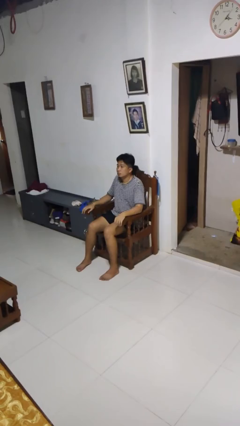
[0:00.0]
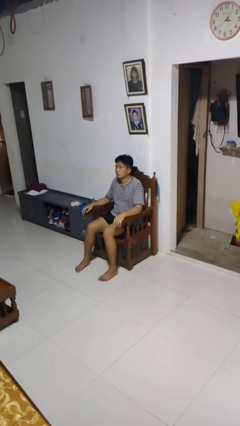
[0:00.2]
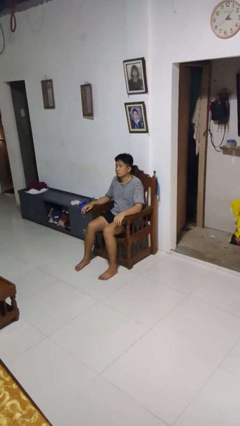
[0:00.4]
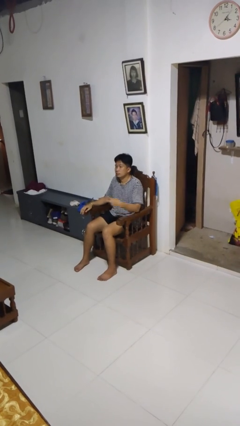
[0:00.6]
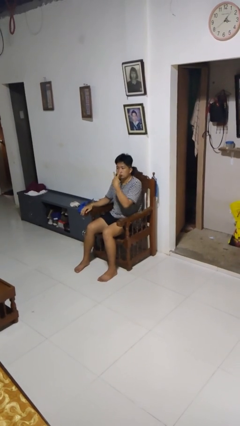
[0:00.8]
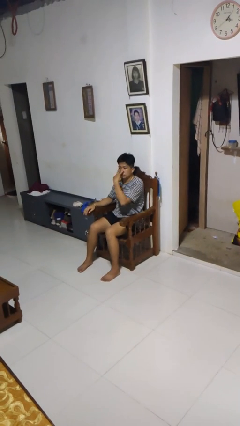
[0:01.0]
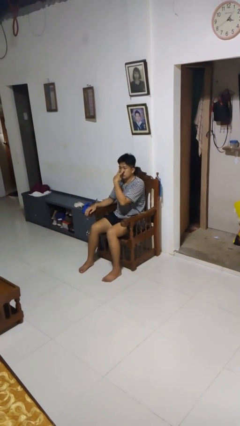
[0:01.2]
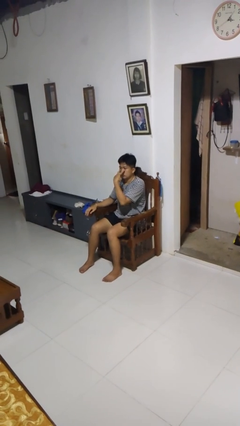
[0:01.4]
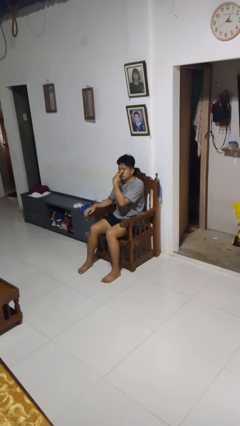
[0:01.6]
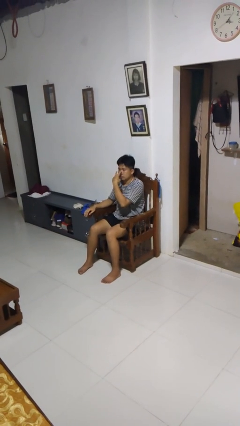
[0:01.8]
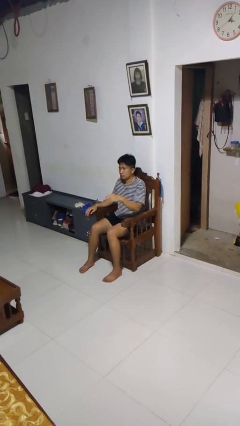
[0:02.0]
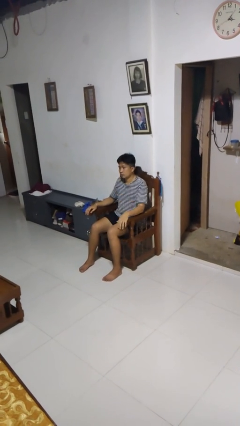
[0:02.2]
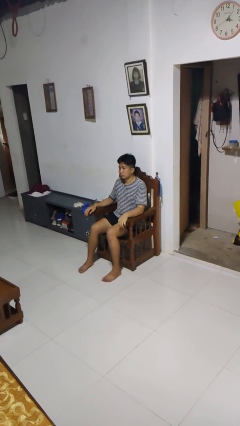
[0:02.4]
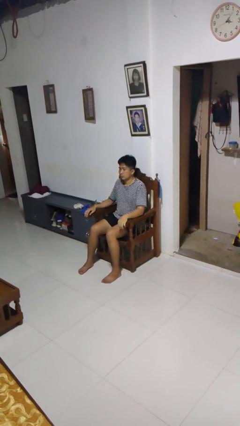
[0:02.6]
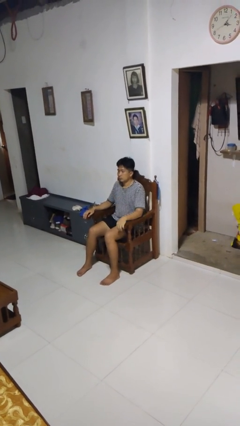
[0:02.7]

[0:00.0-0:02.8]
person gestures watch closely

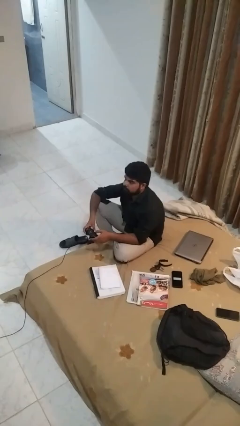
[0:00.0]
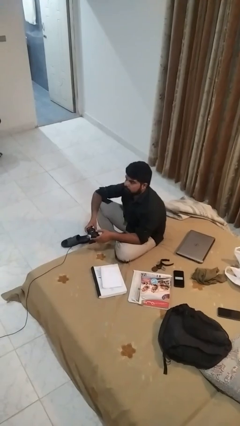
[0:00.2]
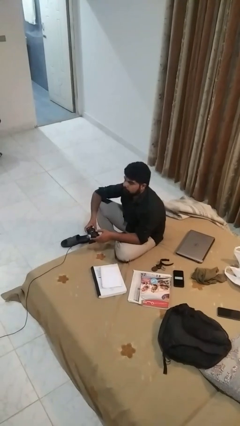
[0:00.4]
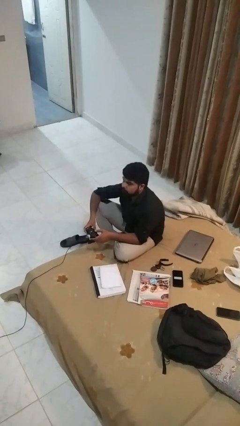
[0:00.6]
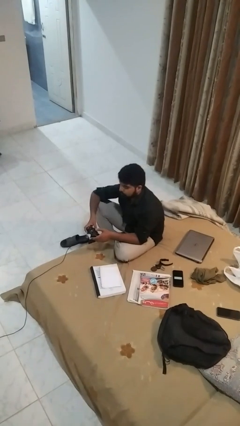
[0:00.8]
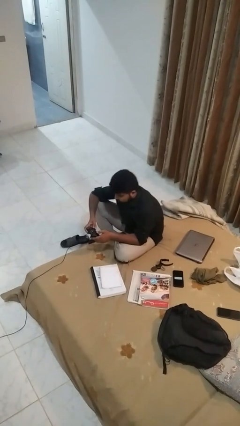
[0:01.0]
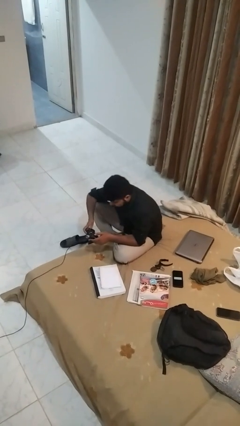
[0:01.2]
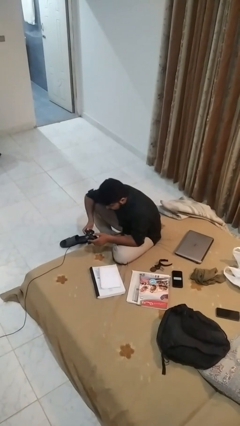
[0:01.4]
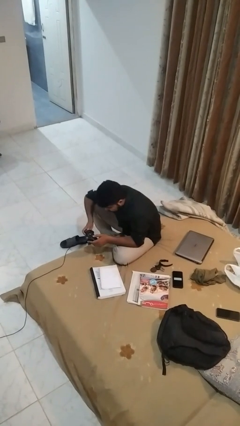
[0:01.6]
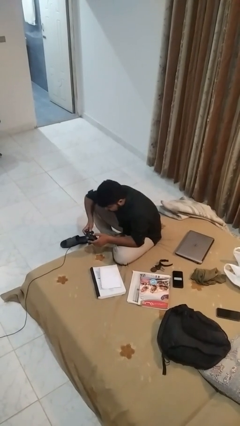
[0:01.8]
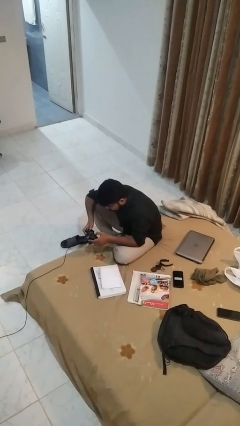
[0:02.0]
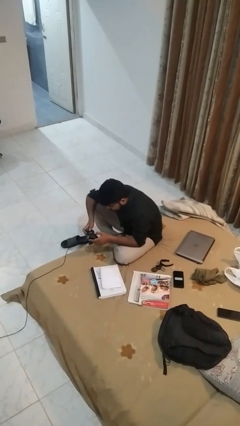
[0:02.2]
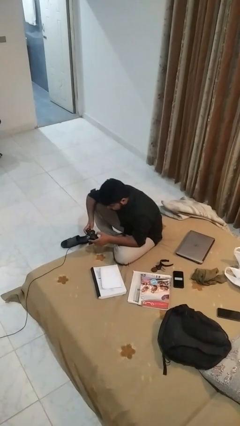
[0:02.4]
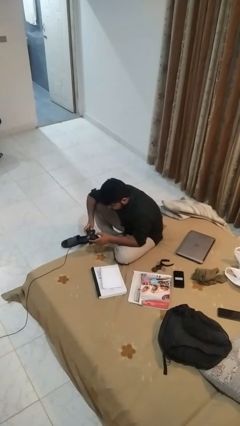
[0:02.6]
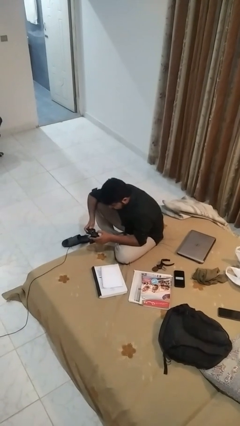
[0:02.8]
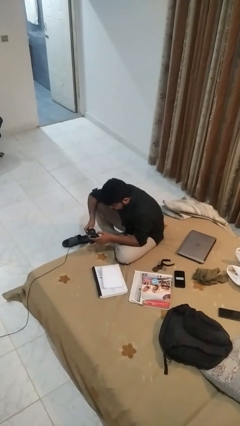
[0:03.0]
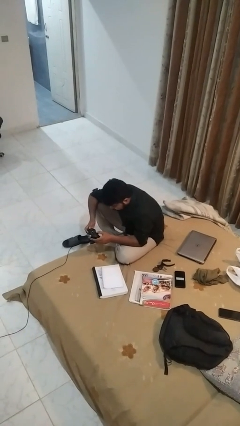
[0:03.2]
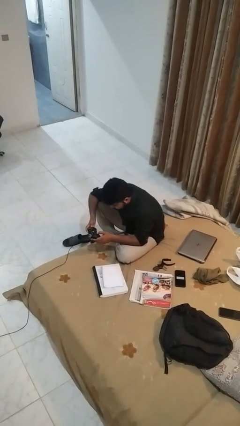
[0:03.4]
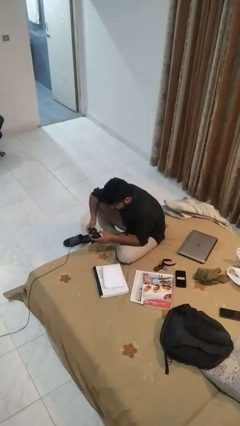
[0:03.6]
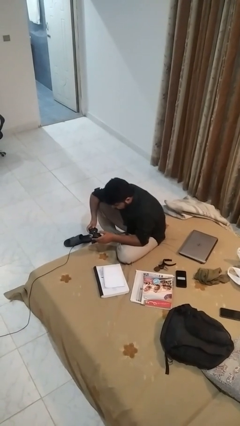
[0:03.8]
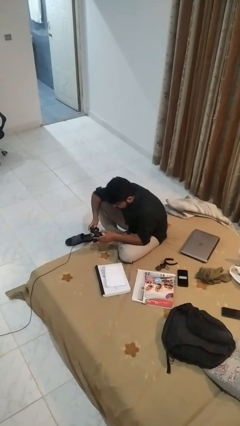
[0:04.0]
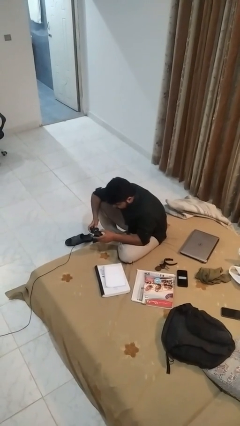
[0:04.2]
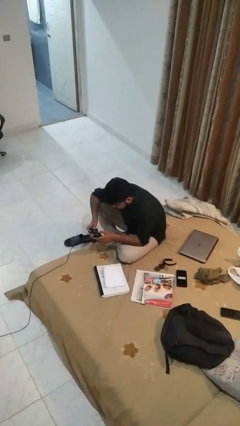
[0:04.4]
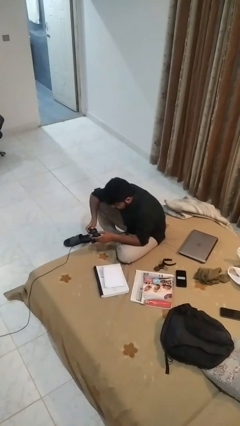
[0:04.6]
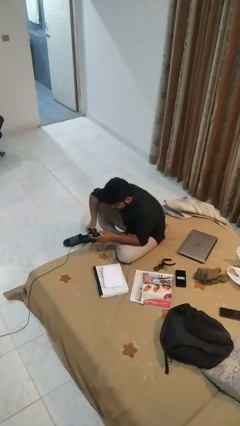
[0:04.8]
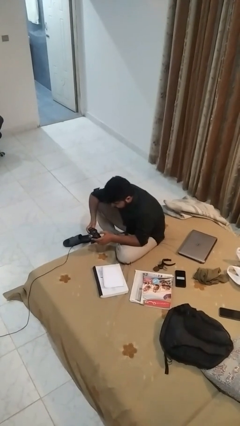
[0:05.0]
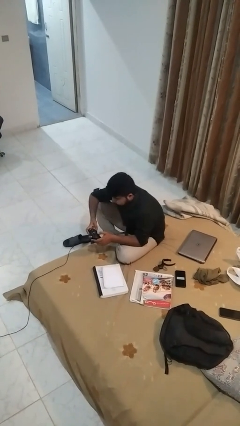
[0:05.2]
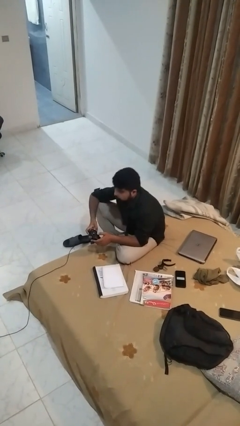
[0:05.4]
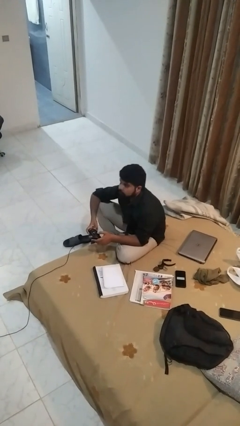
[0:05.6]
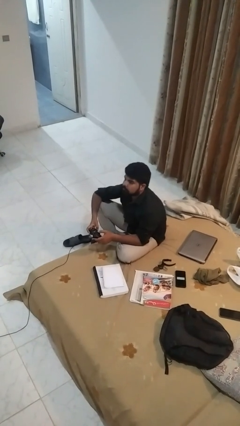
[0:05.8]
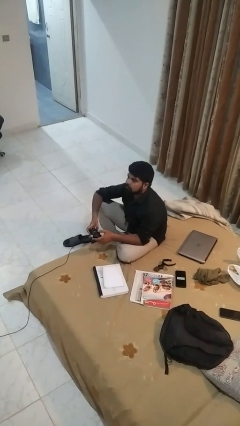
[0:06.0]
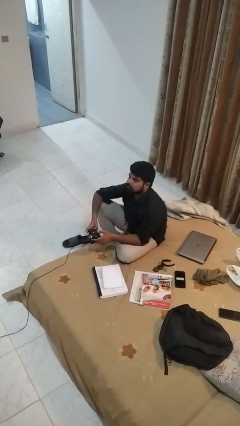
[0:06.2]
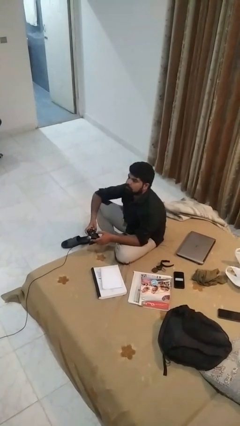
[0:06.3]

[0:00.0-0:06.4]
person interacts with handheld game

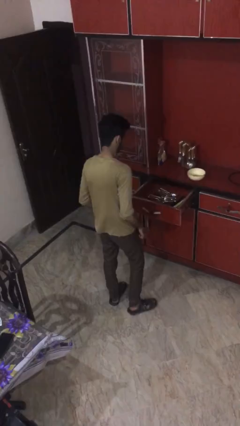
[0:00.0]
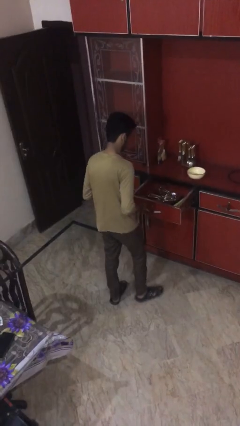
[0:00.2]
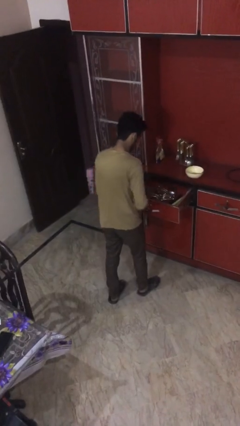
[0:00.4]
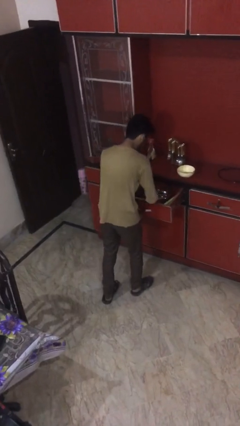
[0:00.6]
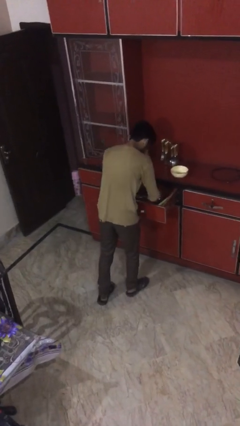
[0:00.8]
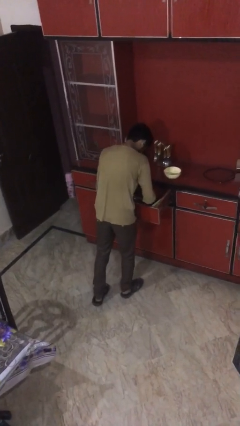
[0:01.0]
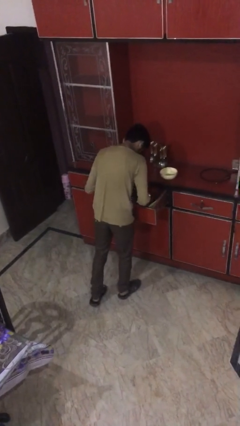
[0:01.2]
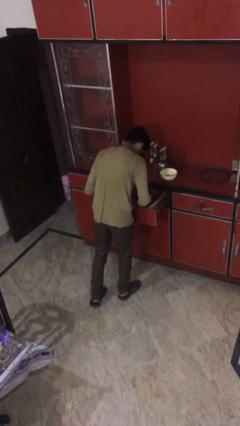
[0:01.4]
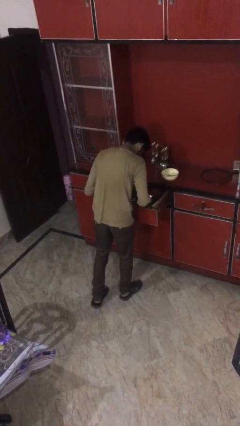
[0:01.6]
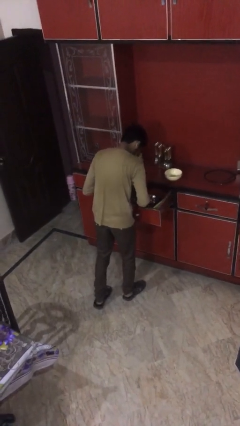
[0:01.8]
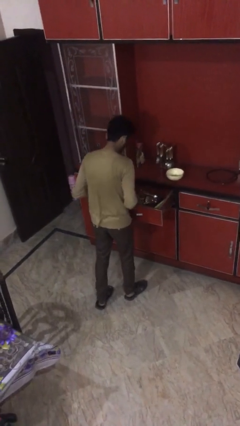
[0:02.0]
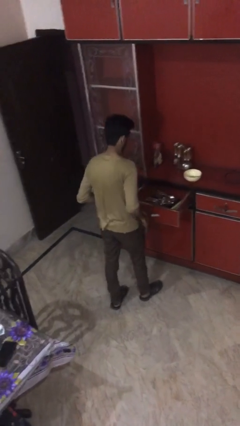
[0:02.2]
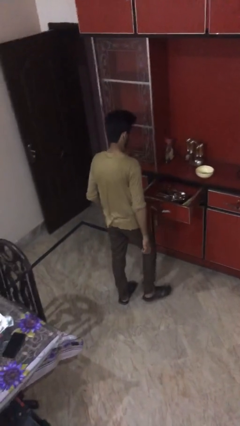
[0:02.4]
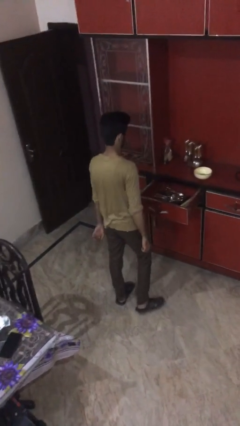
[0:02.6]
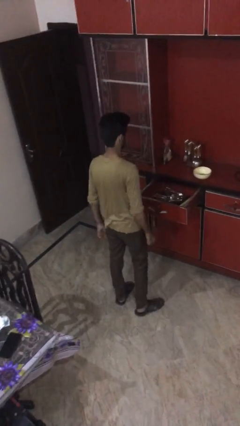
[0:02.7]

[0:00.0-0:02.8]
person searches in kitchen drawer

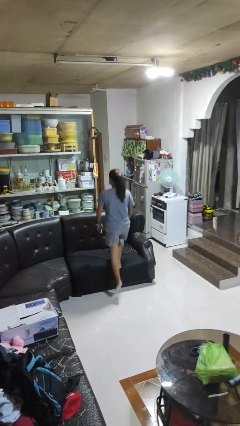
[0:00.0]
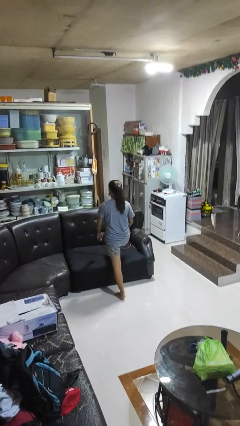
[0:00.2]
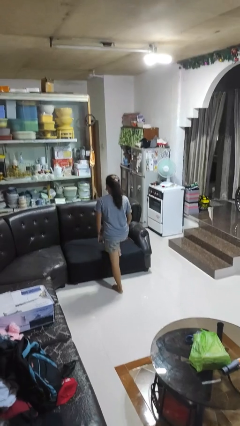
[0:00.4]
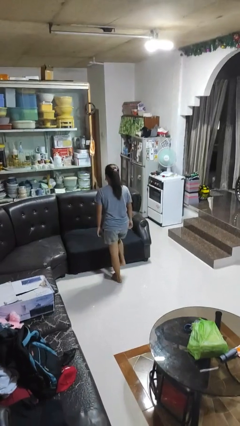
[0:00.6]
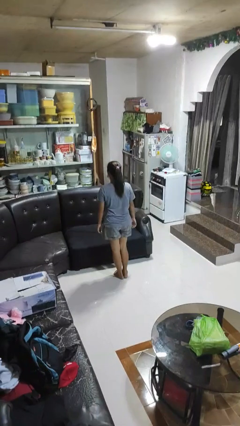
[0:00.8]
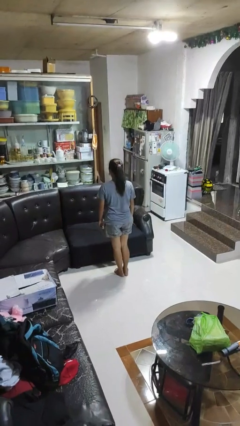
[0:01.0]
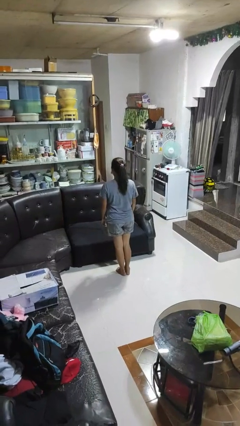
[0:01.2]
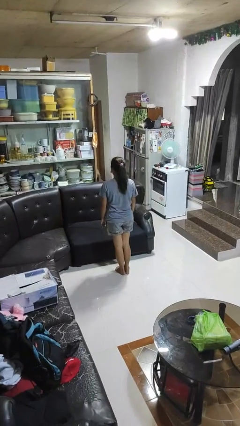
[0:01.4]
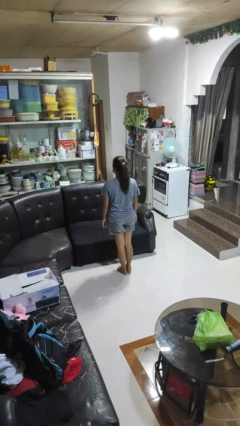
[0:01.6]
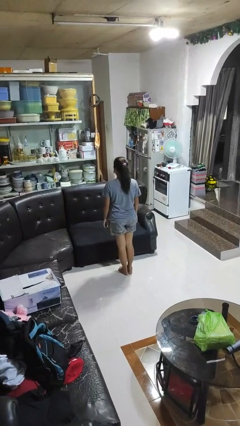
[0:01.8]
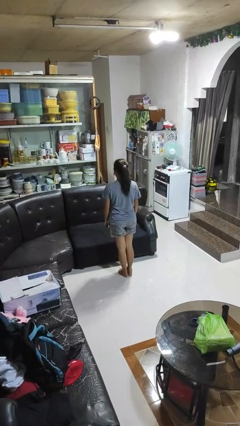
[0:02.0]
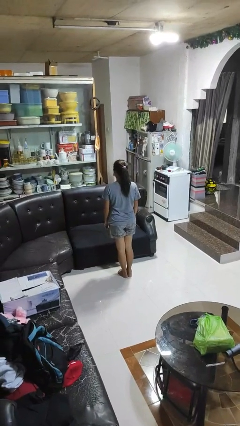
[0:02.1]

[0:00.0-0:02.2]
person climbs off couch

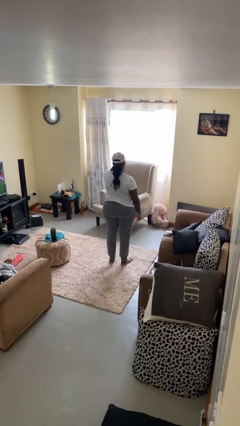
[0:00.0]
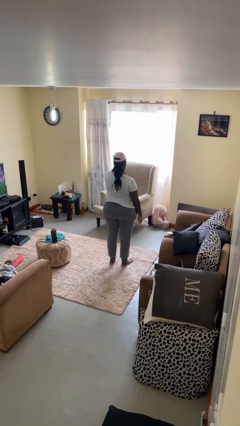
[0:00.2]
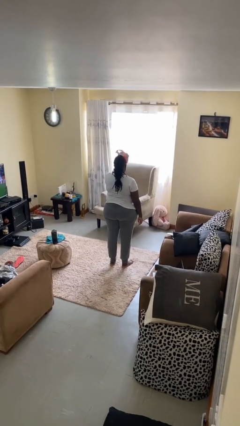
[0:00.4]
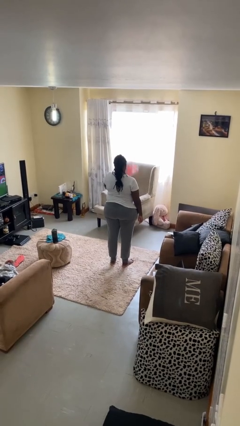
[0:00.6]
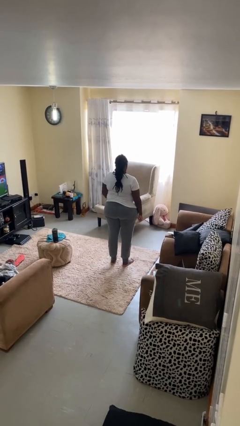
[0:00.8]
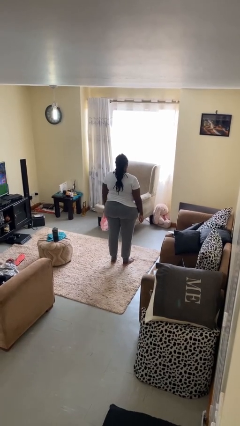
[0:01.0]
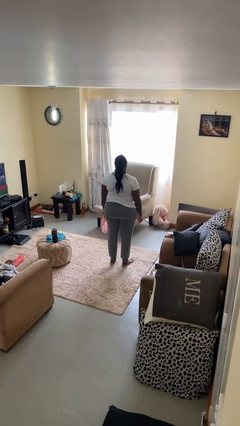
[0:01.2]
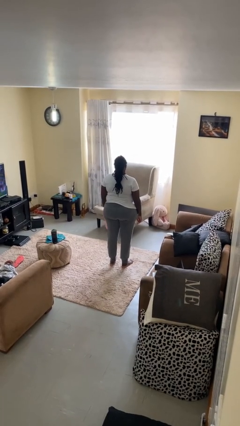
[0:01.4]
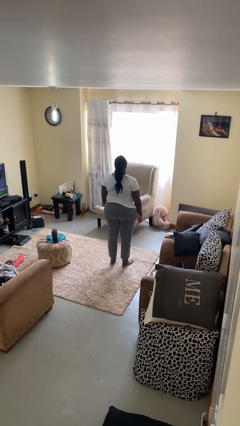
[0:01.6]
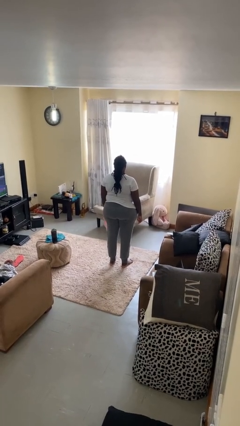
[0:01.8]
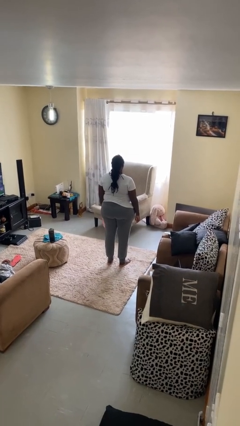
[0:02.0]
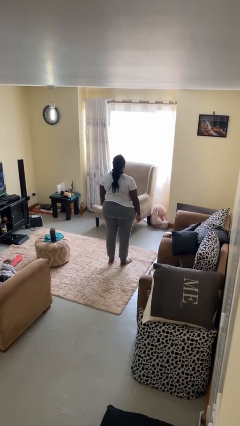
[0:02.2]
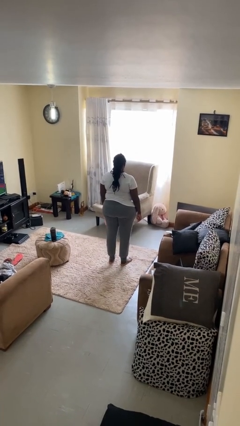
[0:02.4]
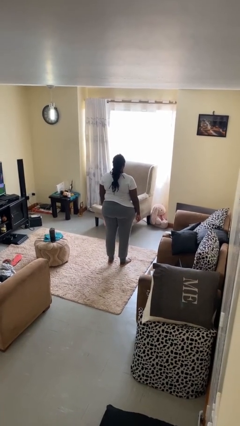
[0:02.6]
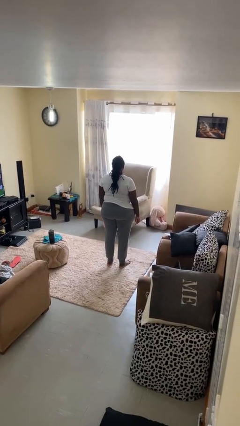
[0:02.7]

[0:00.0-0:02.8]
person takes off hat

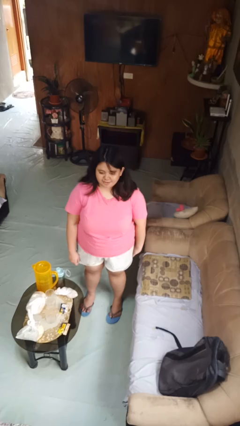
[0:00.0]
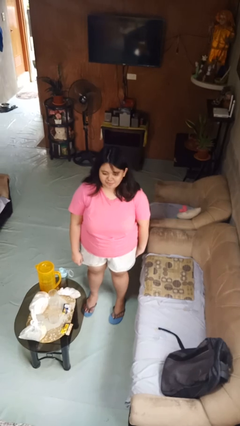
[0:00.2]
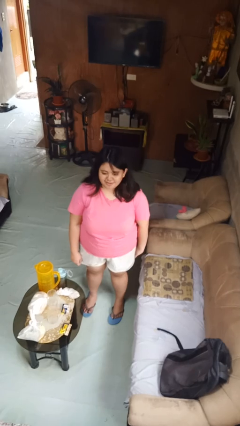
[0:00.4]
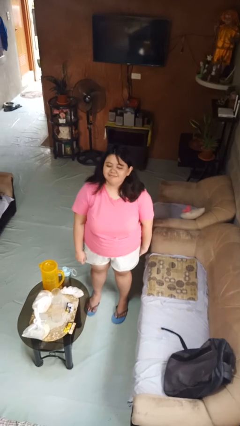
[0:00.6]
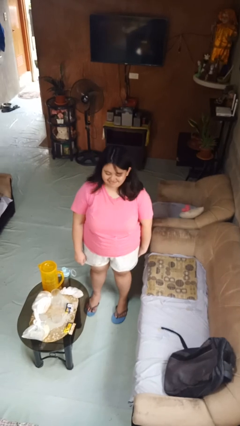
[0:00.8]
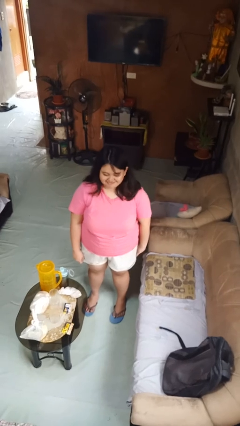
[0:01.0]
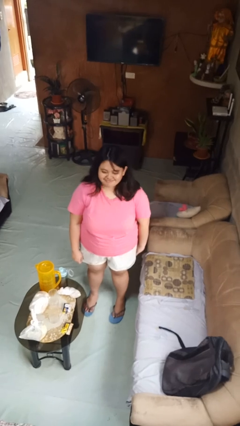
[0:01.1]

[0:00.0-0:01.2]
person nods head
